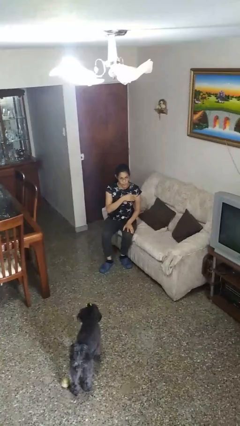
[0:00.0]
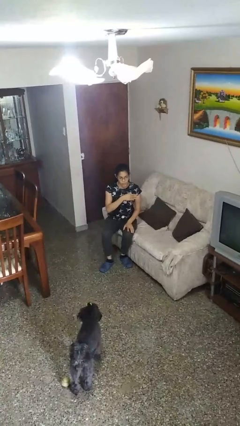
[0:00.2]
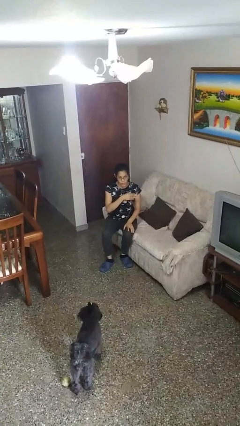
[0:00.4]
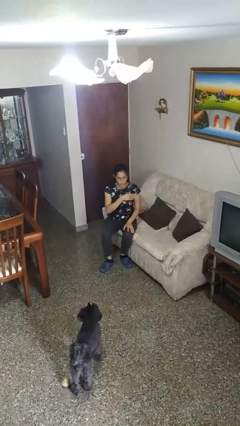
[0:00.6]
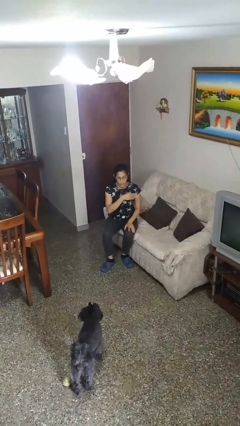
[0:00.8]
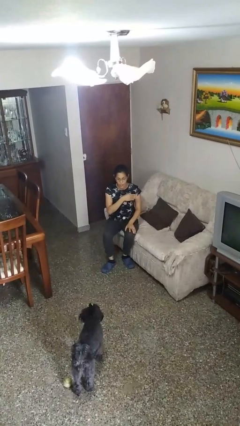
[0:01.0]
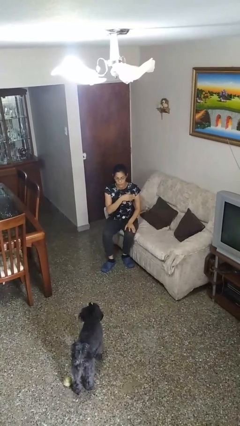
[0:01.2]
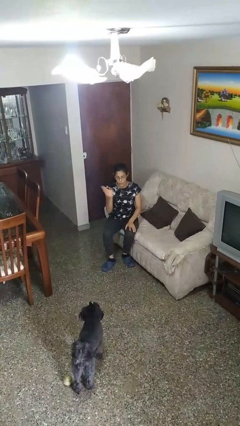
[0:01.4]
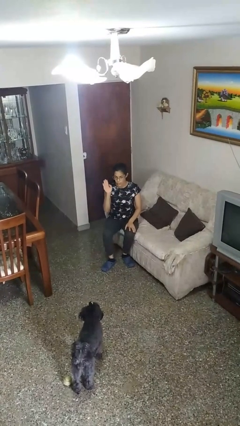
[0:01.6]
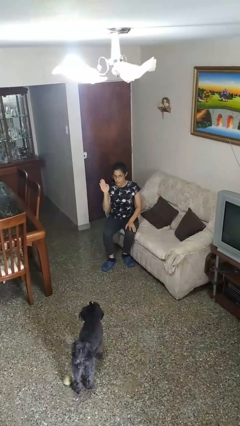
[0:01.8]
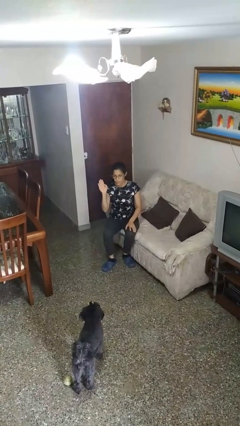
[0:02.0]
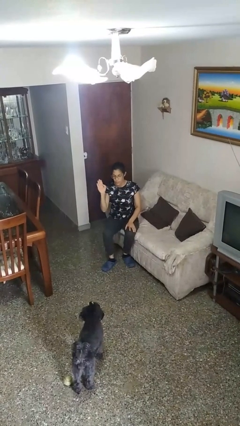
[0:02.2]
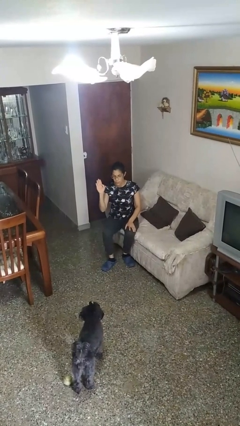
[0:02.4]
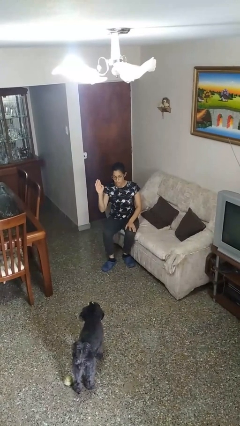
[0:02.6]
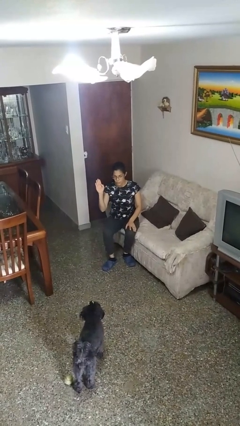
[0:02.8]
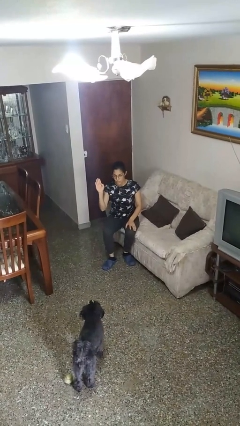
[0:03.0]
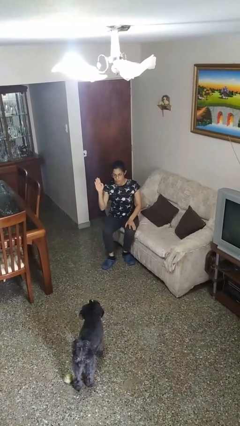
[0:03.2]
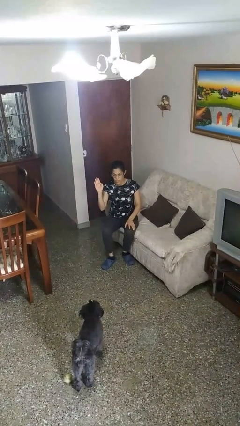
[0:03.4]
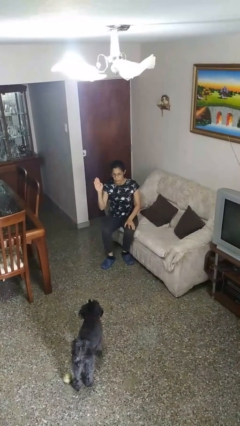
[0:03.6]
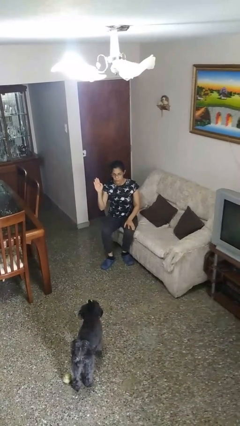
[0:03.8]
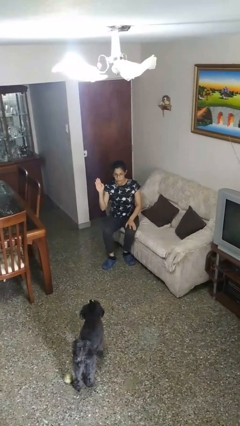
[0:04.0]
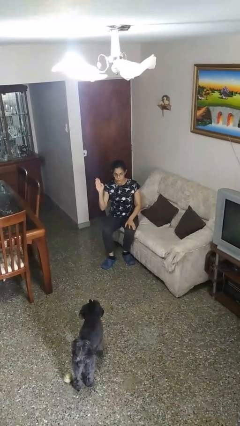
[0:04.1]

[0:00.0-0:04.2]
person gestures swipe right

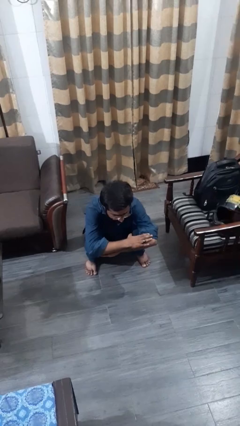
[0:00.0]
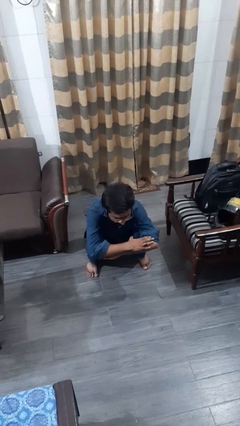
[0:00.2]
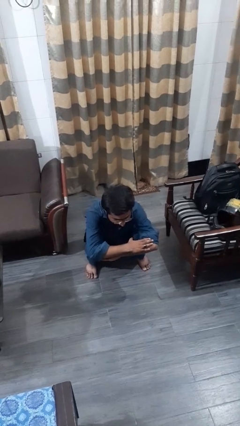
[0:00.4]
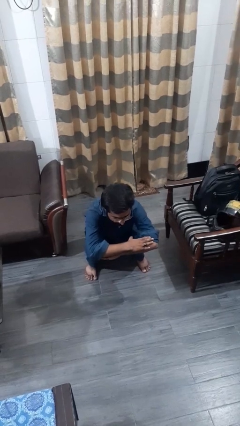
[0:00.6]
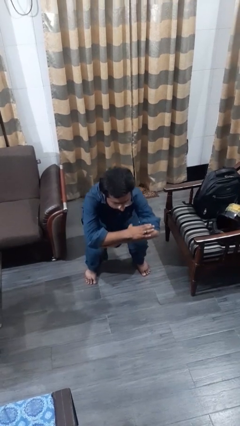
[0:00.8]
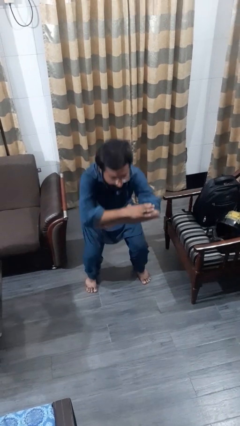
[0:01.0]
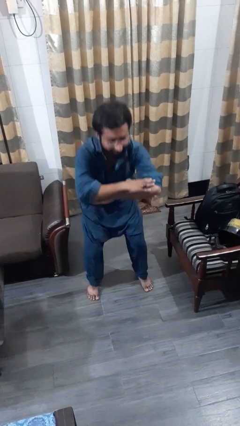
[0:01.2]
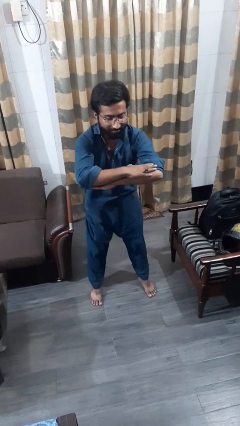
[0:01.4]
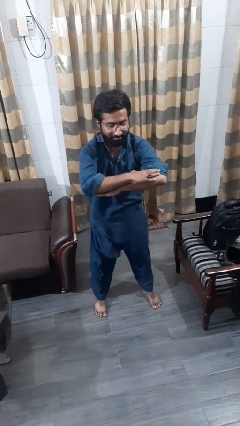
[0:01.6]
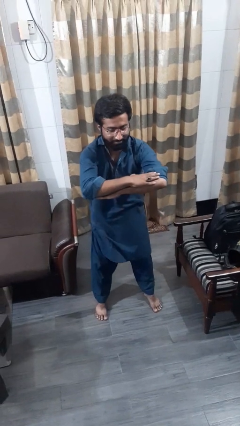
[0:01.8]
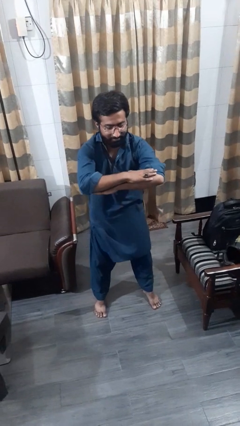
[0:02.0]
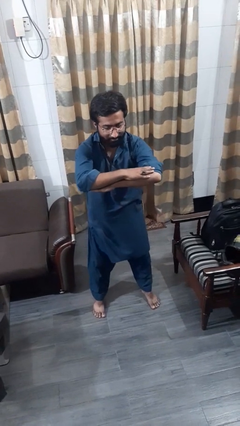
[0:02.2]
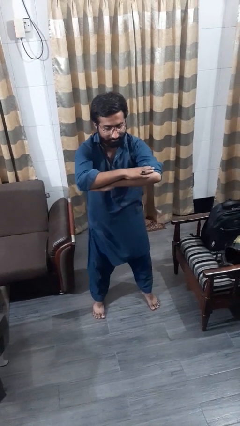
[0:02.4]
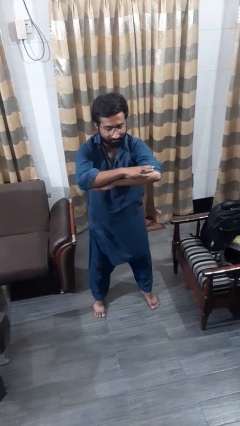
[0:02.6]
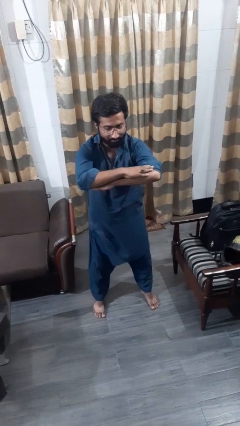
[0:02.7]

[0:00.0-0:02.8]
person stands up

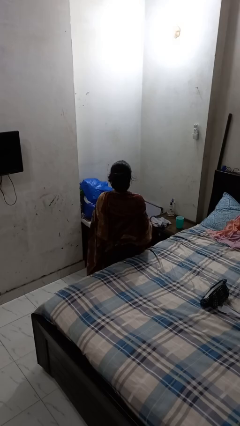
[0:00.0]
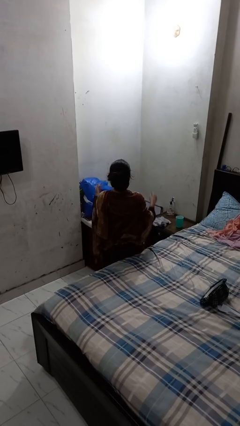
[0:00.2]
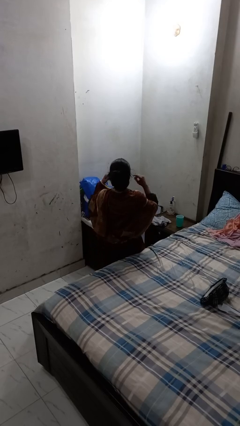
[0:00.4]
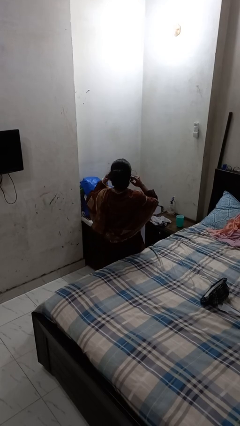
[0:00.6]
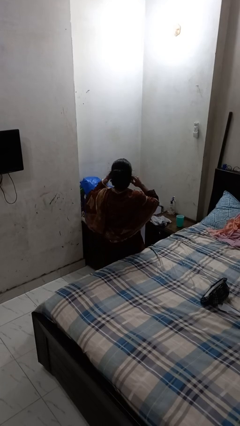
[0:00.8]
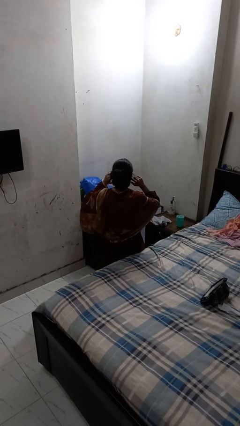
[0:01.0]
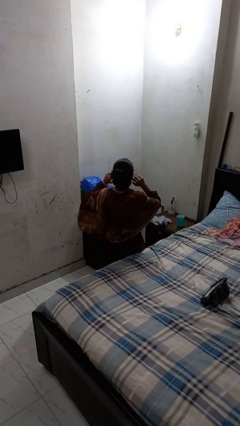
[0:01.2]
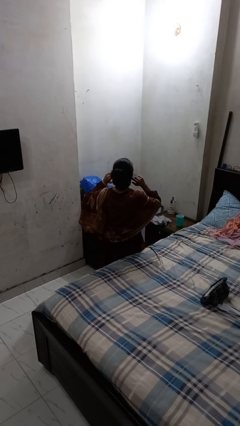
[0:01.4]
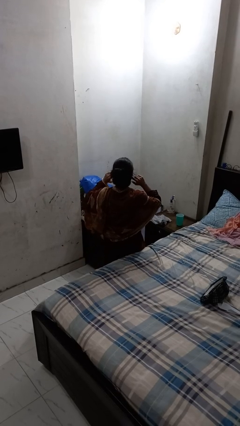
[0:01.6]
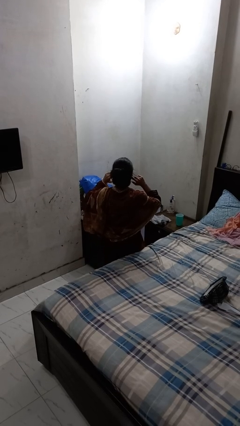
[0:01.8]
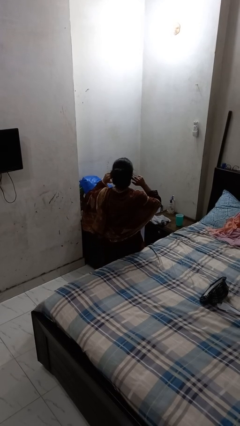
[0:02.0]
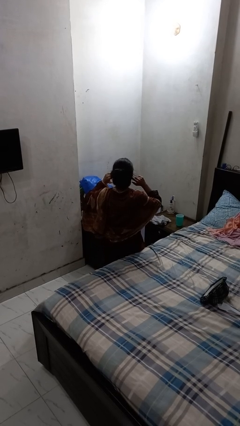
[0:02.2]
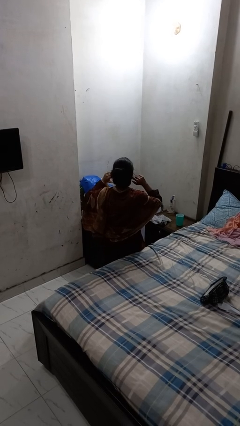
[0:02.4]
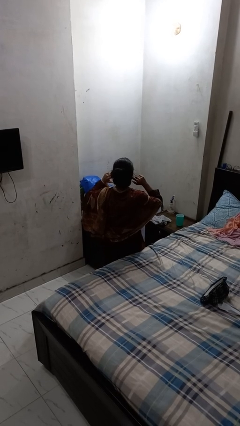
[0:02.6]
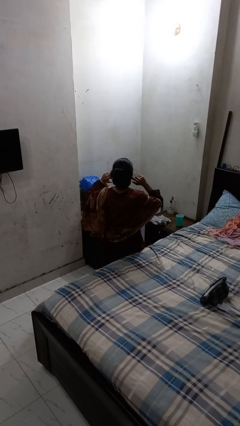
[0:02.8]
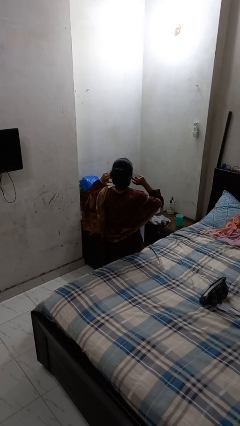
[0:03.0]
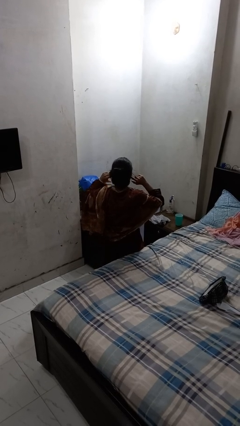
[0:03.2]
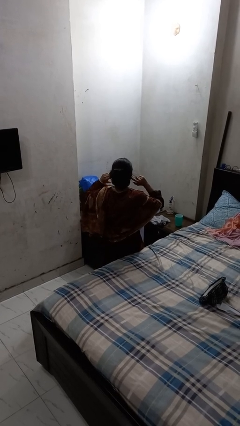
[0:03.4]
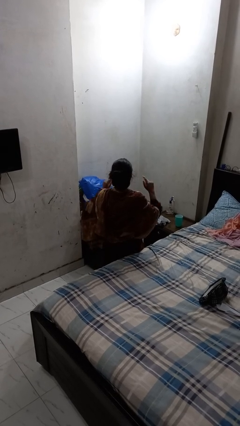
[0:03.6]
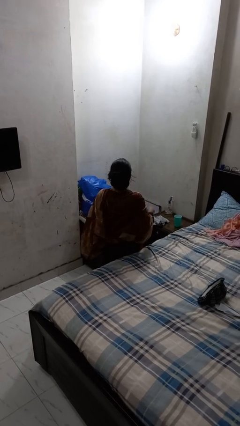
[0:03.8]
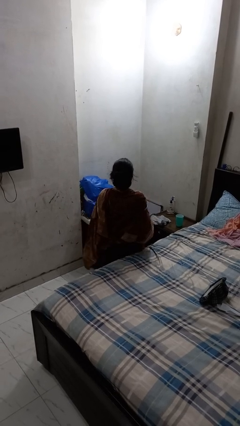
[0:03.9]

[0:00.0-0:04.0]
person puts fingers in ear

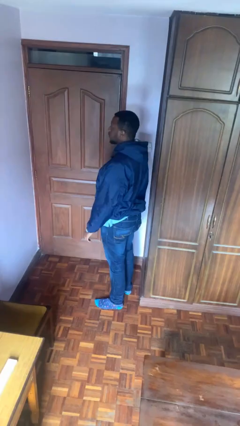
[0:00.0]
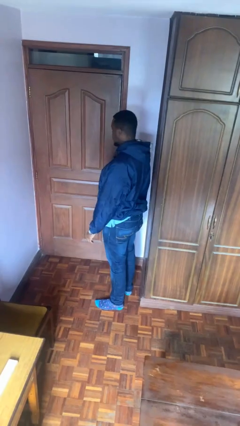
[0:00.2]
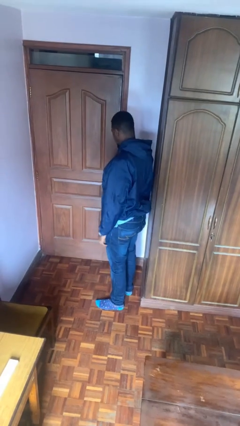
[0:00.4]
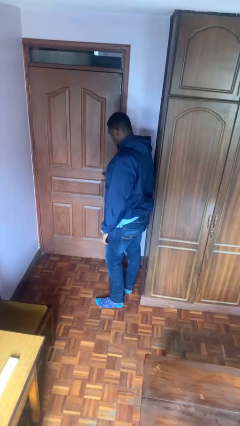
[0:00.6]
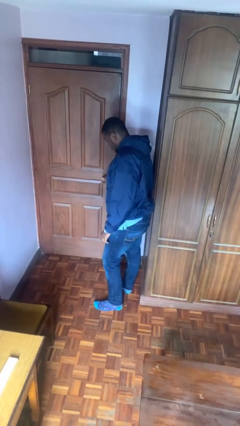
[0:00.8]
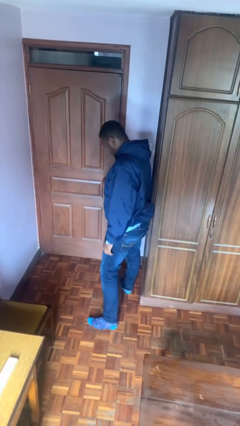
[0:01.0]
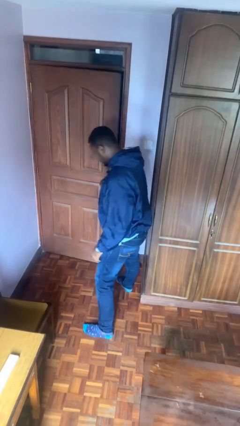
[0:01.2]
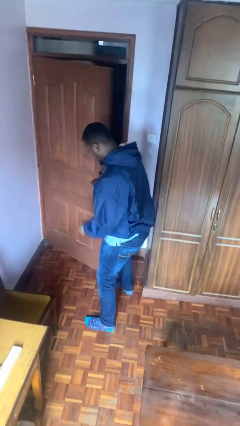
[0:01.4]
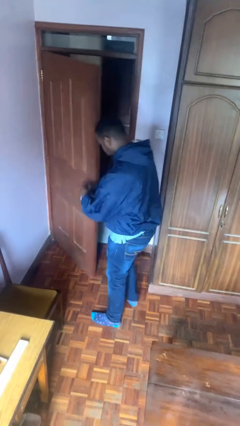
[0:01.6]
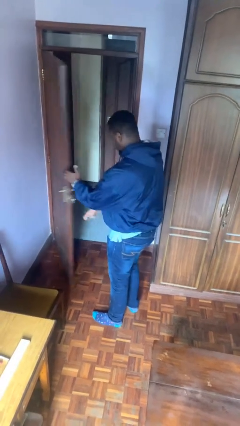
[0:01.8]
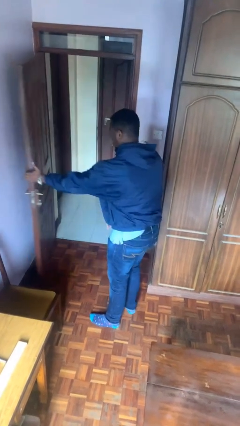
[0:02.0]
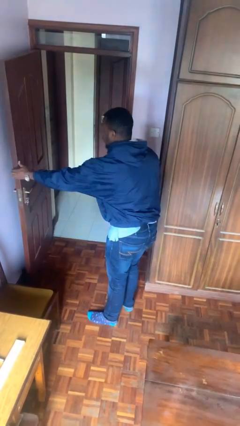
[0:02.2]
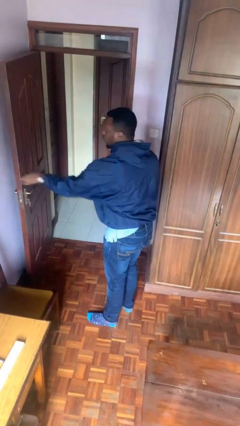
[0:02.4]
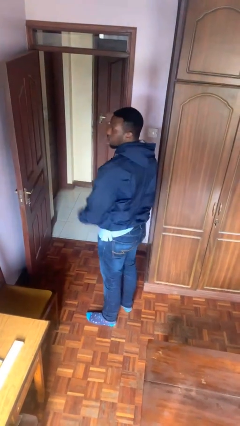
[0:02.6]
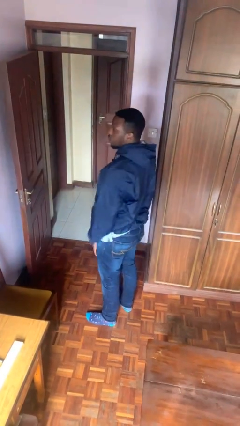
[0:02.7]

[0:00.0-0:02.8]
person opens facility door

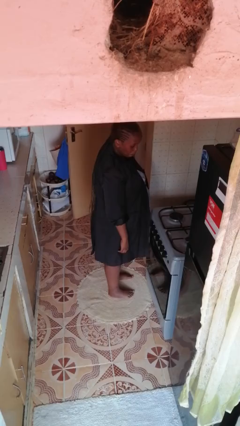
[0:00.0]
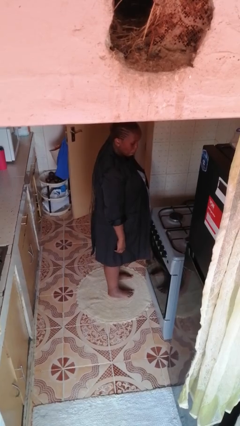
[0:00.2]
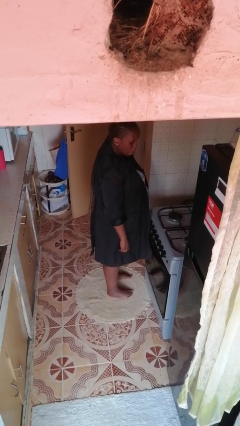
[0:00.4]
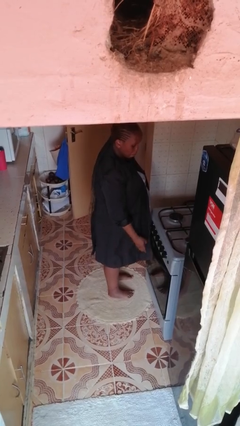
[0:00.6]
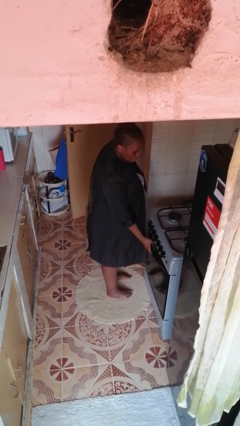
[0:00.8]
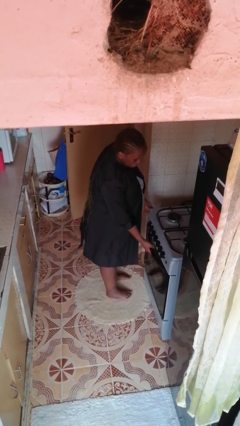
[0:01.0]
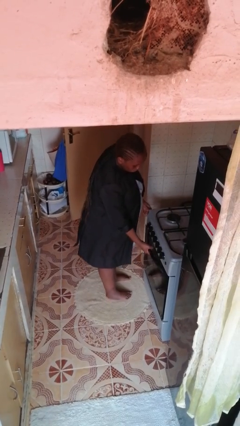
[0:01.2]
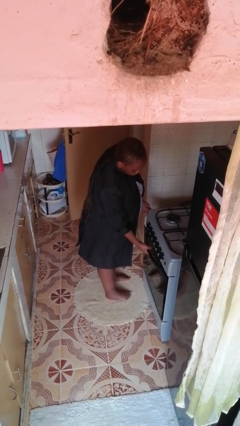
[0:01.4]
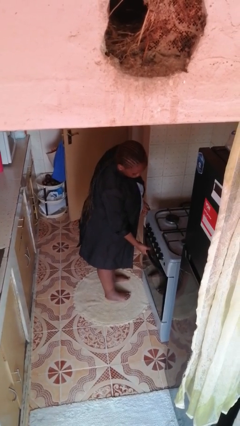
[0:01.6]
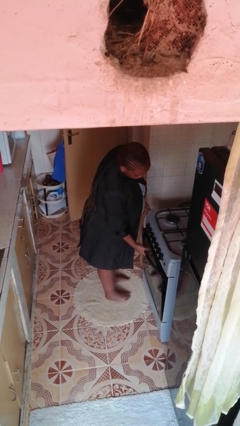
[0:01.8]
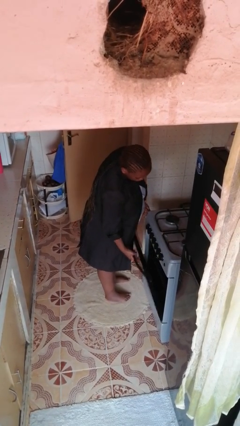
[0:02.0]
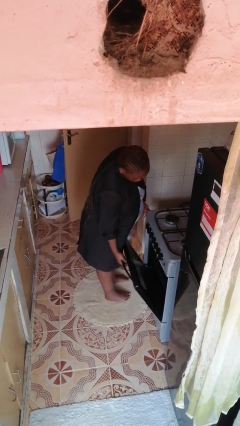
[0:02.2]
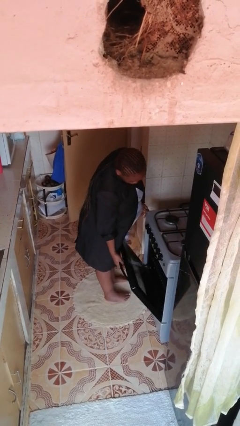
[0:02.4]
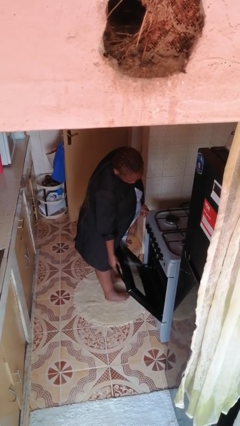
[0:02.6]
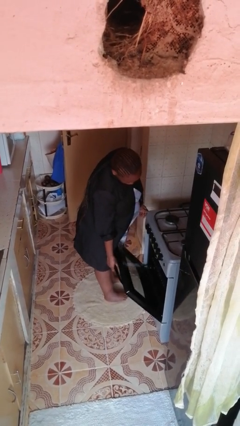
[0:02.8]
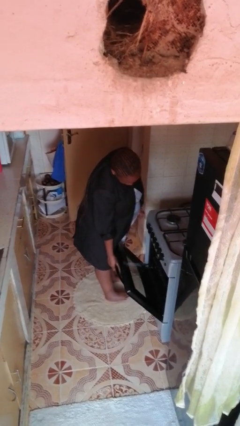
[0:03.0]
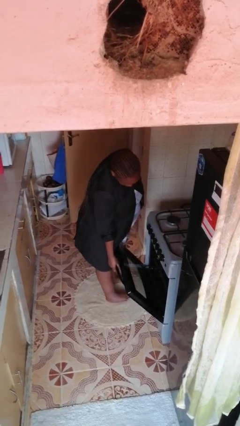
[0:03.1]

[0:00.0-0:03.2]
person opens oven door
